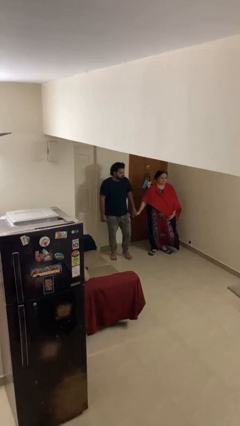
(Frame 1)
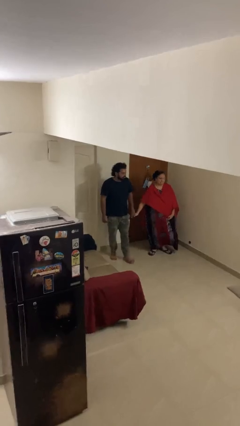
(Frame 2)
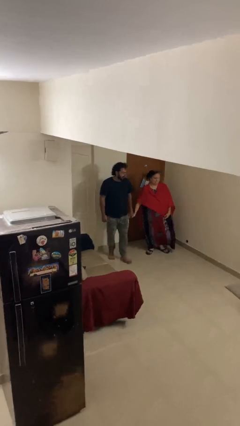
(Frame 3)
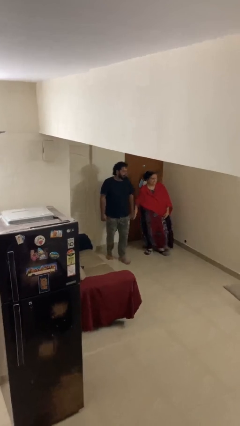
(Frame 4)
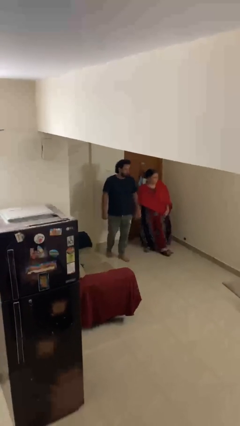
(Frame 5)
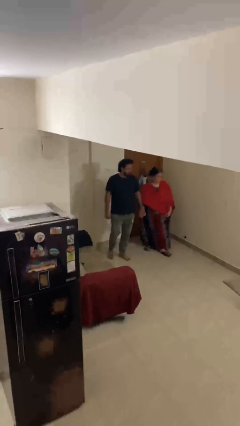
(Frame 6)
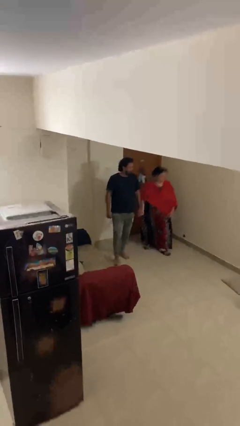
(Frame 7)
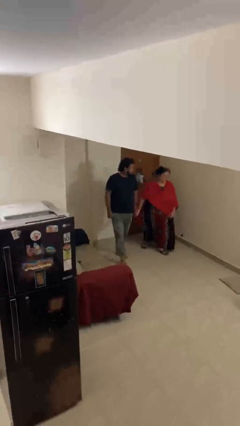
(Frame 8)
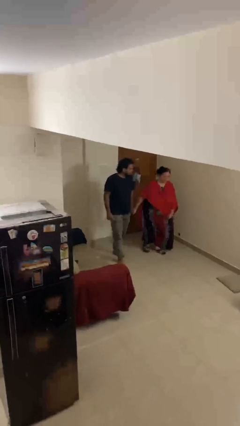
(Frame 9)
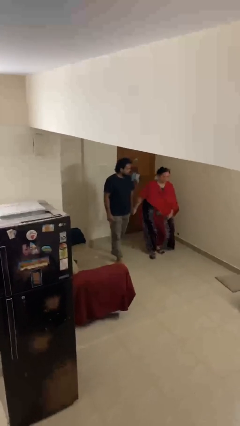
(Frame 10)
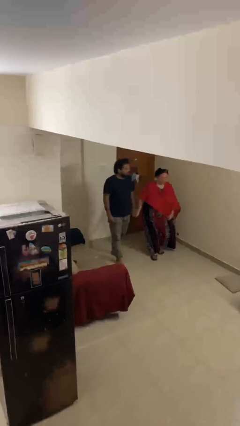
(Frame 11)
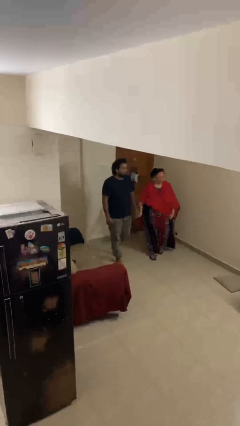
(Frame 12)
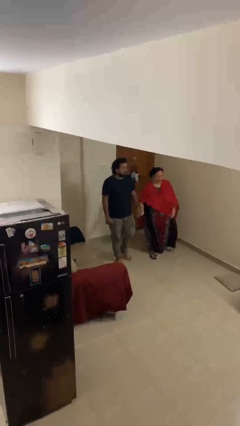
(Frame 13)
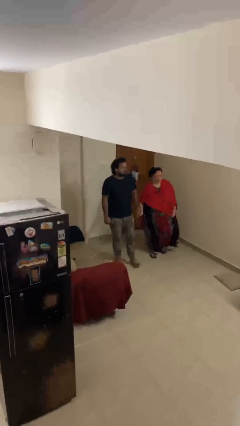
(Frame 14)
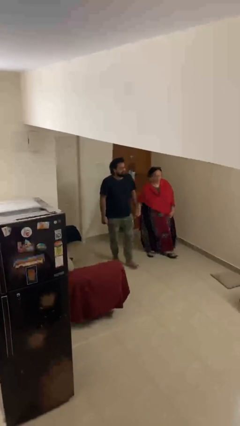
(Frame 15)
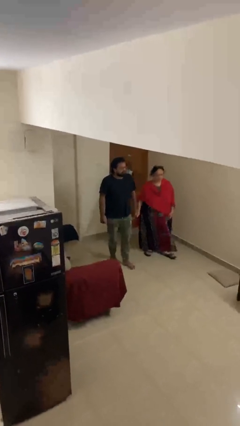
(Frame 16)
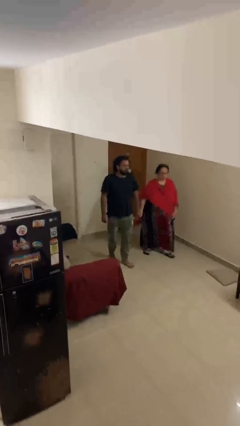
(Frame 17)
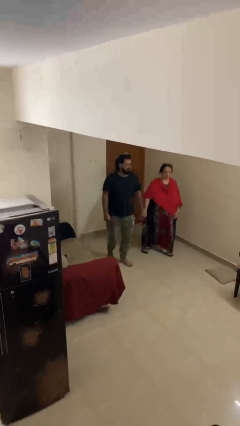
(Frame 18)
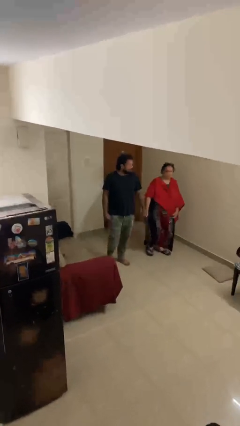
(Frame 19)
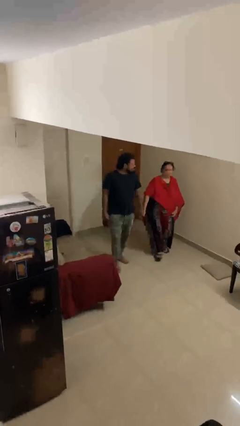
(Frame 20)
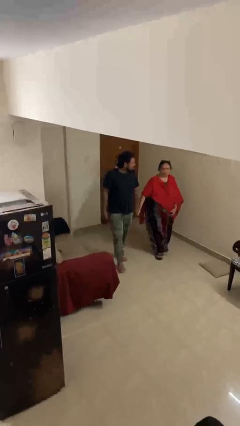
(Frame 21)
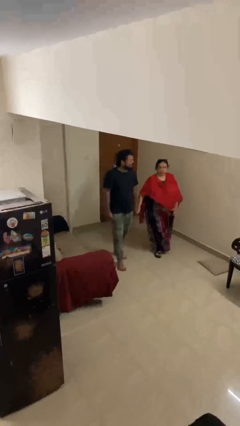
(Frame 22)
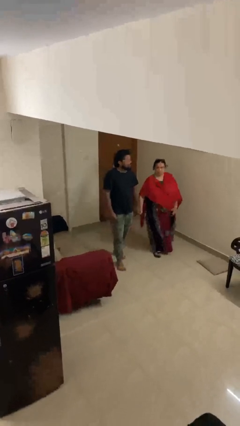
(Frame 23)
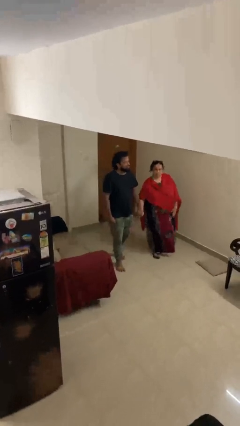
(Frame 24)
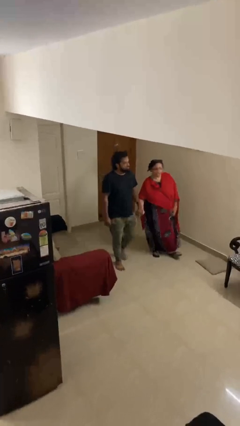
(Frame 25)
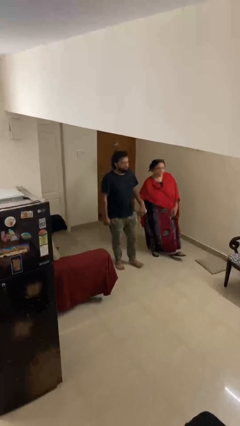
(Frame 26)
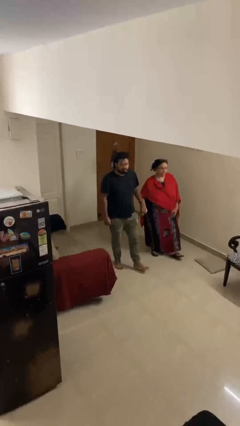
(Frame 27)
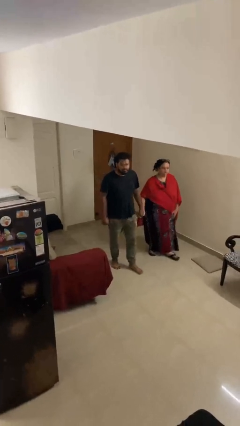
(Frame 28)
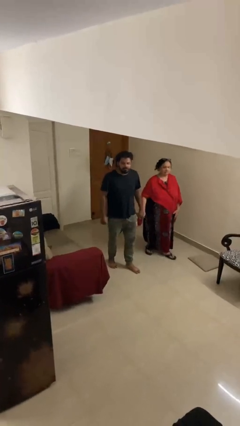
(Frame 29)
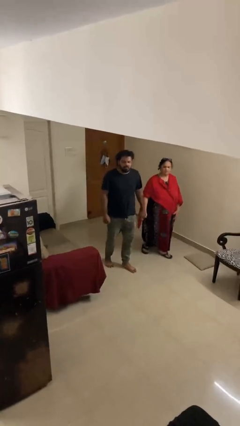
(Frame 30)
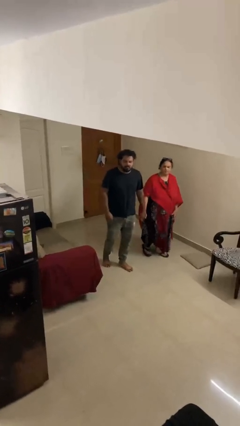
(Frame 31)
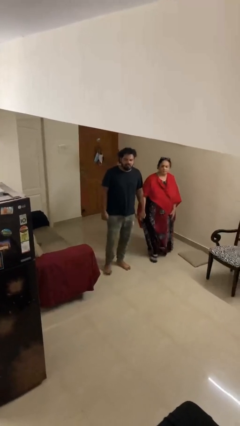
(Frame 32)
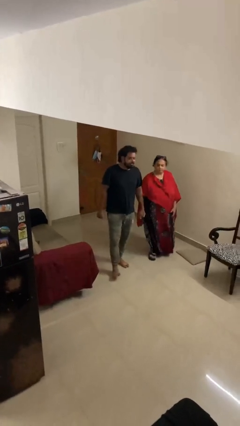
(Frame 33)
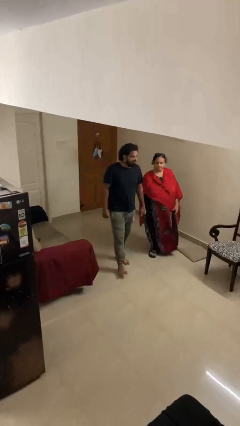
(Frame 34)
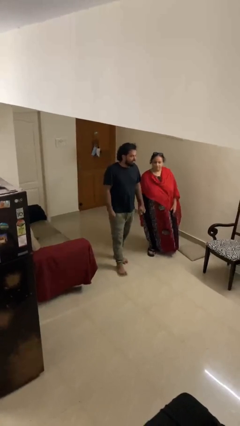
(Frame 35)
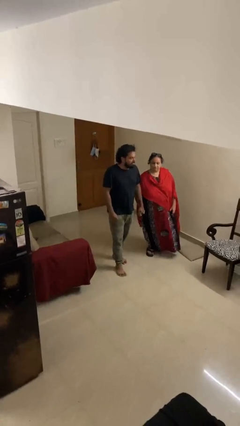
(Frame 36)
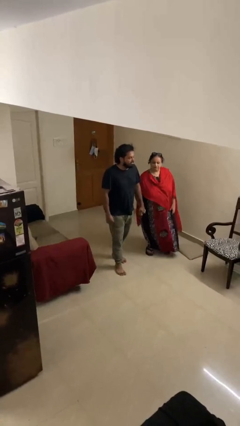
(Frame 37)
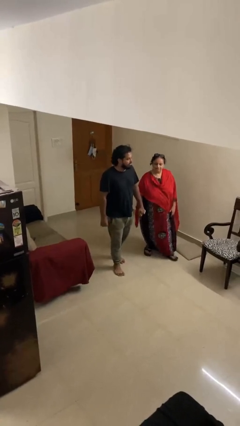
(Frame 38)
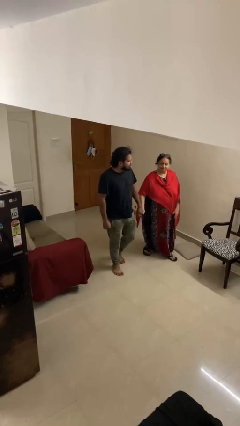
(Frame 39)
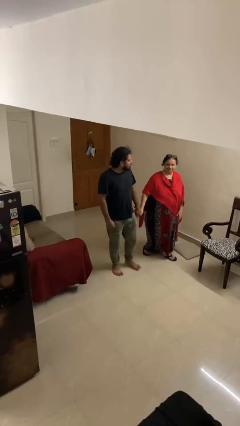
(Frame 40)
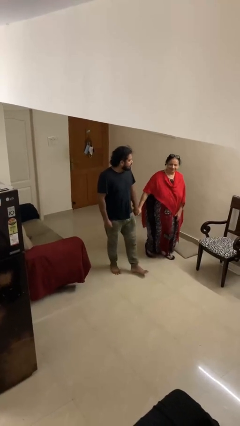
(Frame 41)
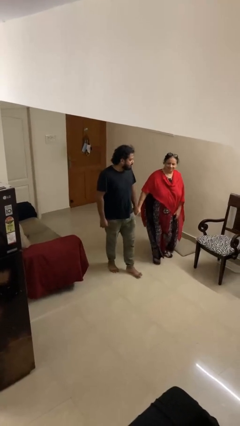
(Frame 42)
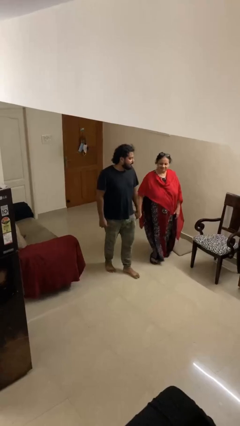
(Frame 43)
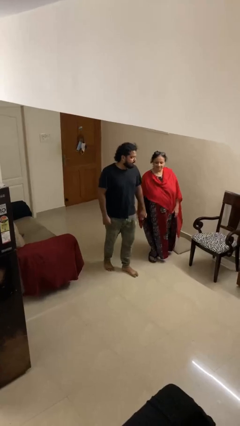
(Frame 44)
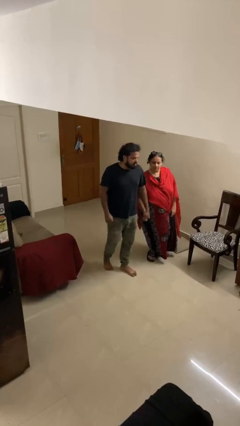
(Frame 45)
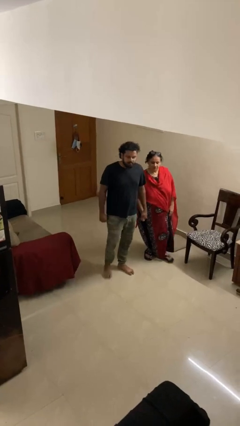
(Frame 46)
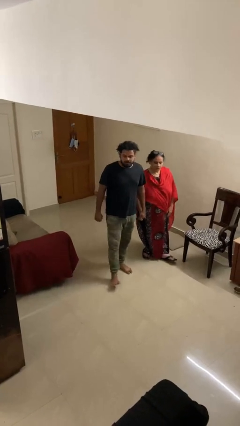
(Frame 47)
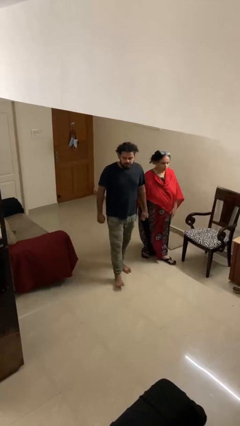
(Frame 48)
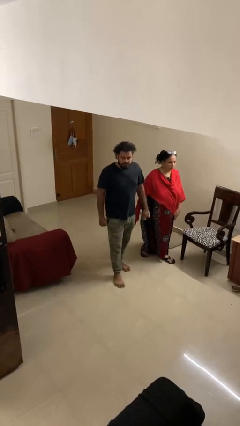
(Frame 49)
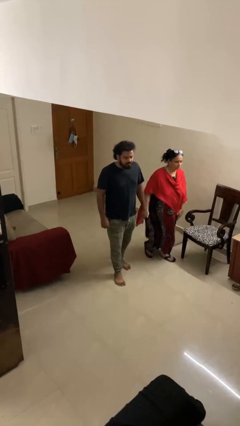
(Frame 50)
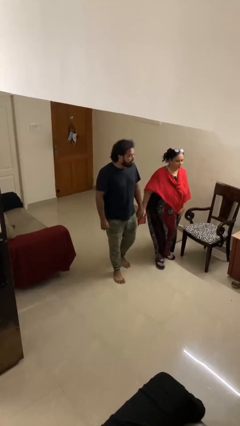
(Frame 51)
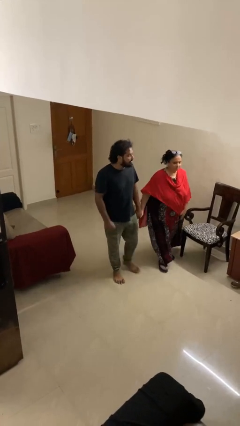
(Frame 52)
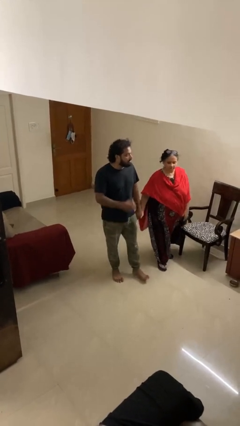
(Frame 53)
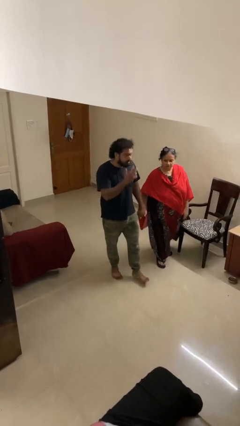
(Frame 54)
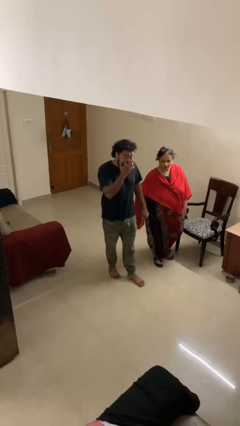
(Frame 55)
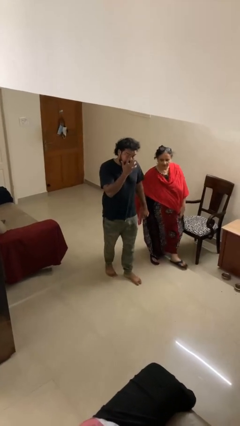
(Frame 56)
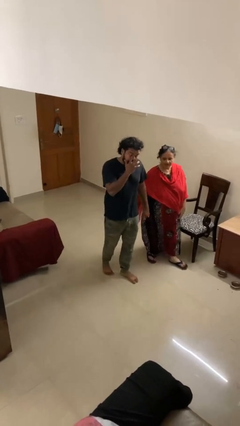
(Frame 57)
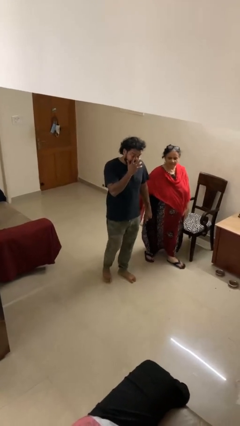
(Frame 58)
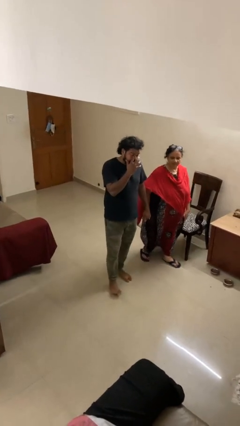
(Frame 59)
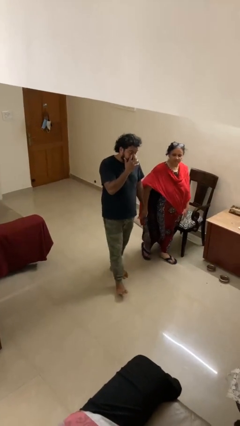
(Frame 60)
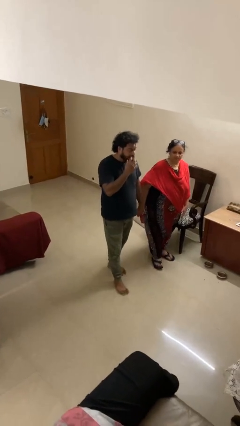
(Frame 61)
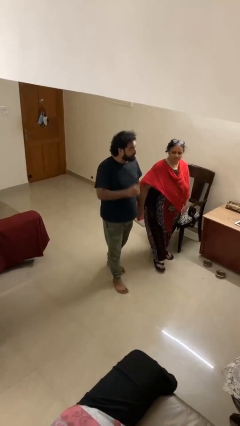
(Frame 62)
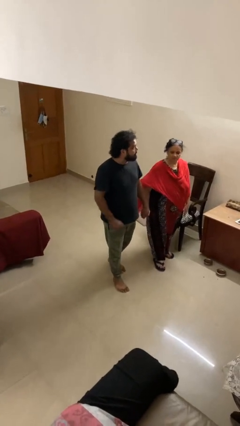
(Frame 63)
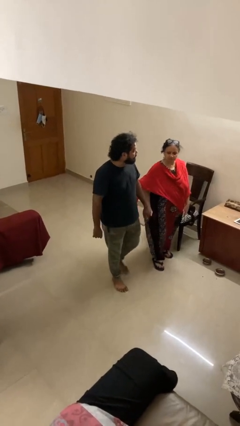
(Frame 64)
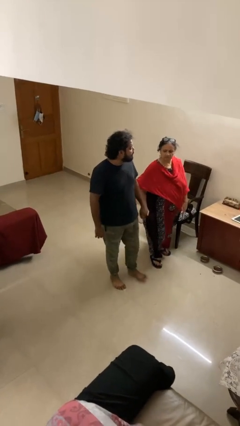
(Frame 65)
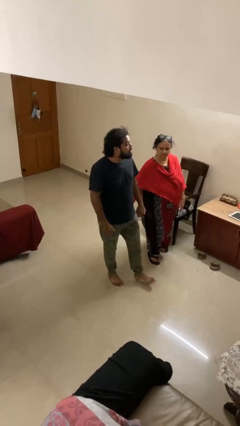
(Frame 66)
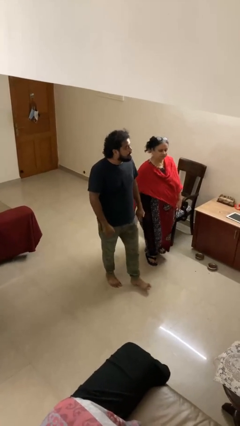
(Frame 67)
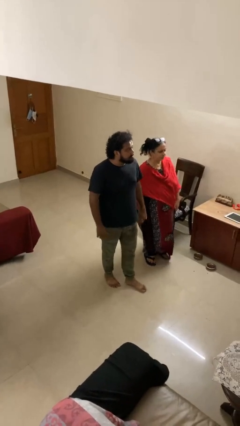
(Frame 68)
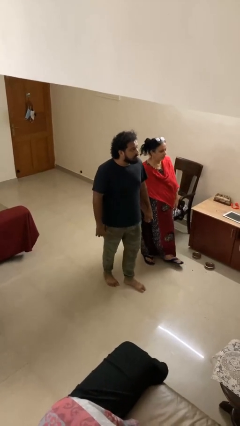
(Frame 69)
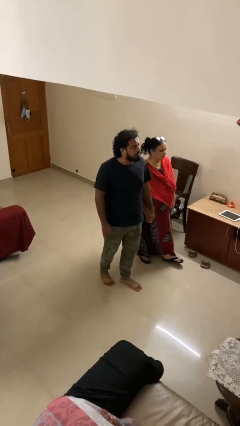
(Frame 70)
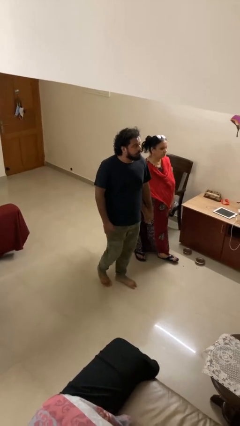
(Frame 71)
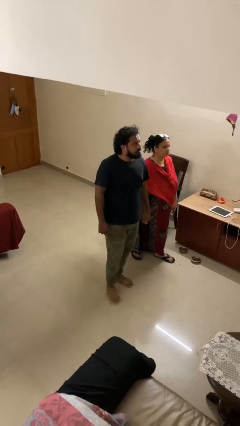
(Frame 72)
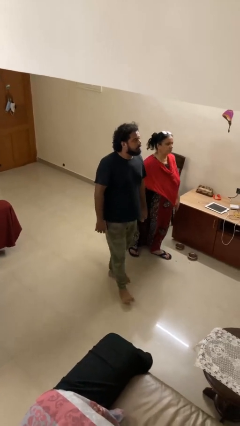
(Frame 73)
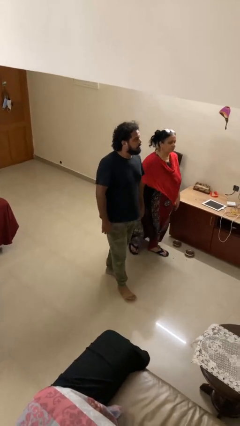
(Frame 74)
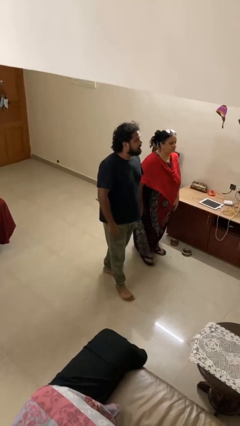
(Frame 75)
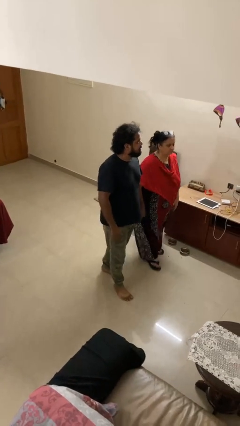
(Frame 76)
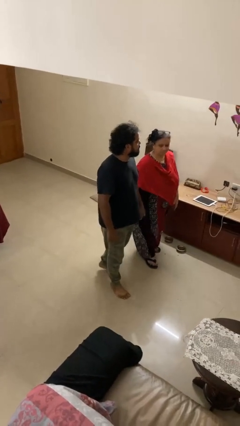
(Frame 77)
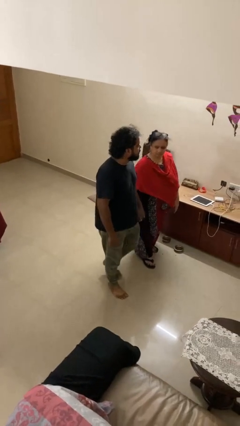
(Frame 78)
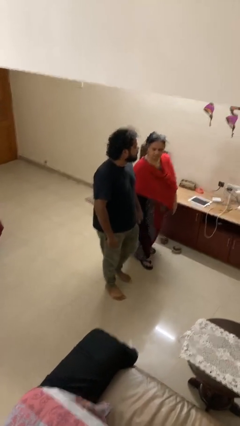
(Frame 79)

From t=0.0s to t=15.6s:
person holds hand

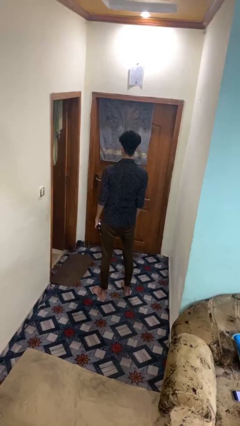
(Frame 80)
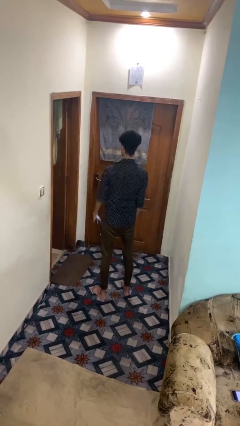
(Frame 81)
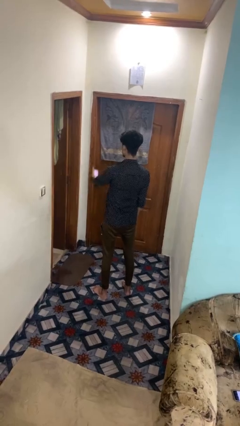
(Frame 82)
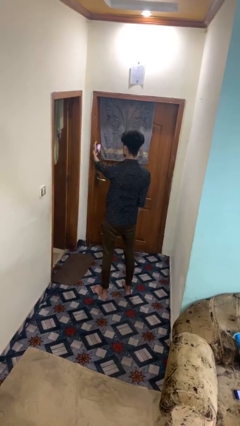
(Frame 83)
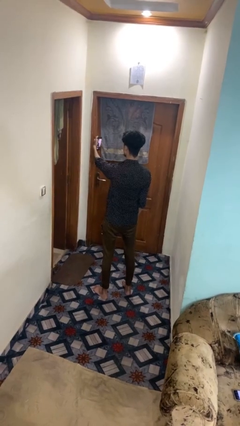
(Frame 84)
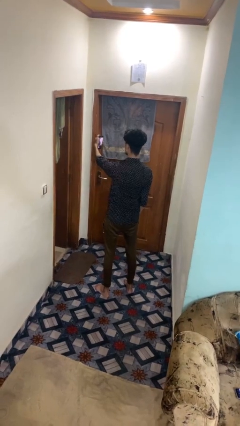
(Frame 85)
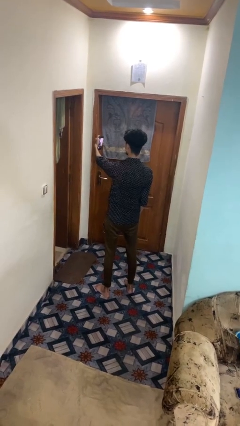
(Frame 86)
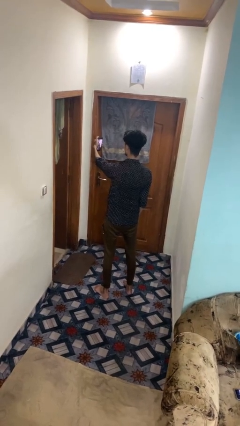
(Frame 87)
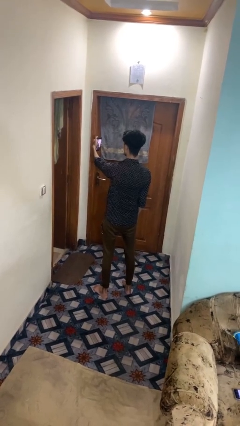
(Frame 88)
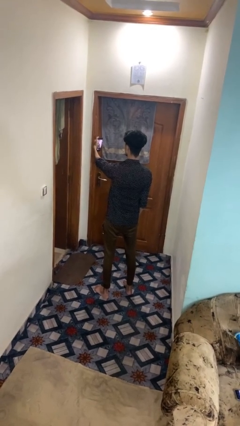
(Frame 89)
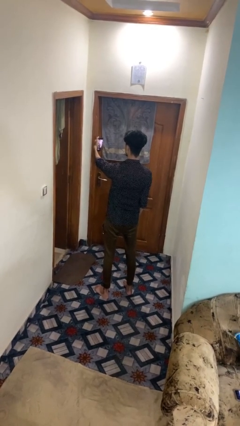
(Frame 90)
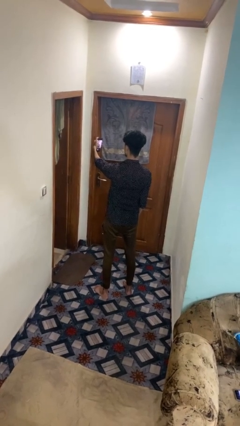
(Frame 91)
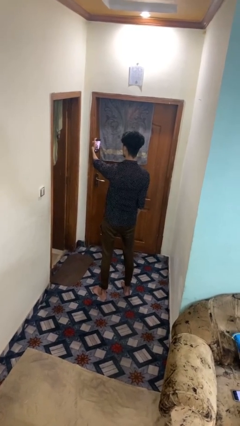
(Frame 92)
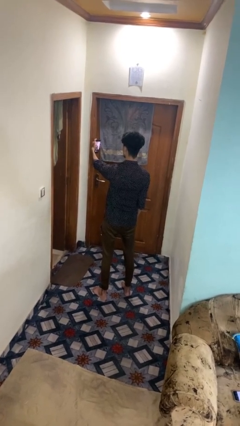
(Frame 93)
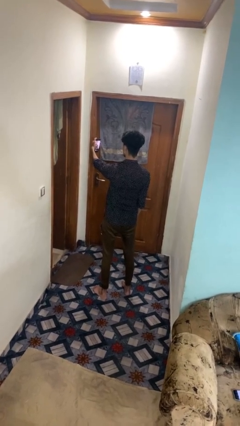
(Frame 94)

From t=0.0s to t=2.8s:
person takes selfie

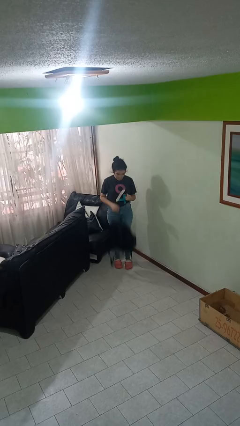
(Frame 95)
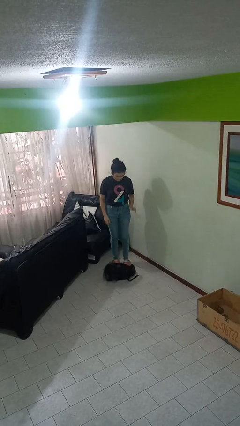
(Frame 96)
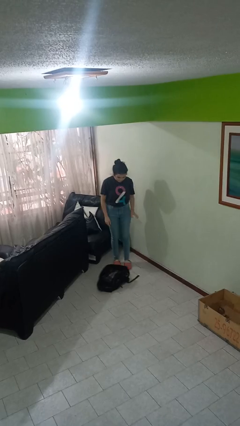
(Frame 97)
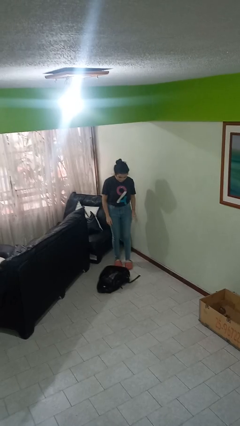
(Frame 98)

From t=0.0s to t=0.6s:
person drops object
